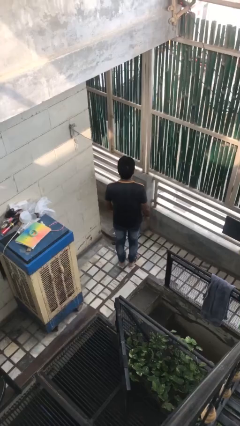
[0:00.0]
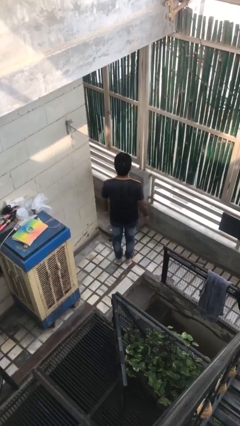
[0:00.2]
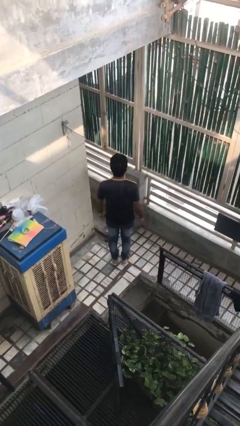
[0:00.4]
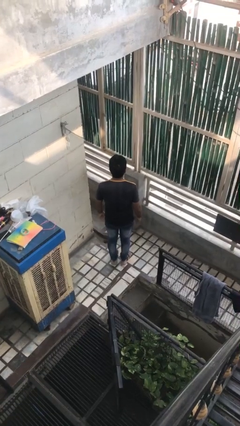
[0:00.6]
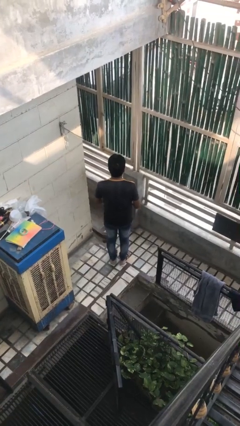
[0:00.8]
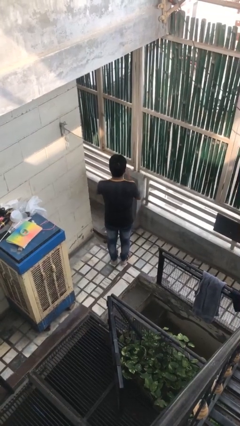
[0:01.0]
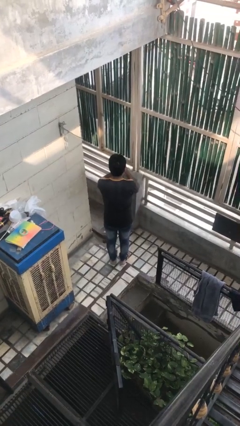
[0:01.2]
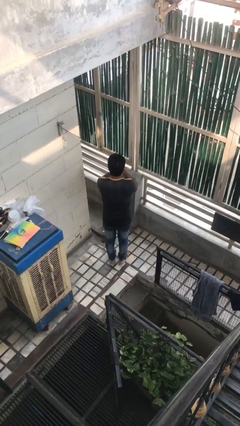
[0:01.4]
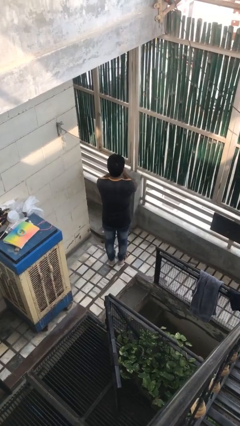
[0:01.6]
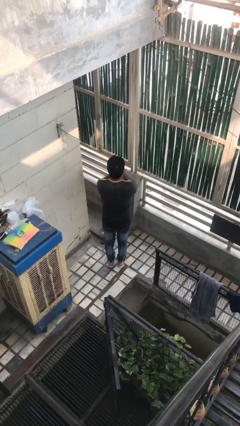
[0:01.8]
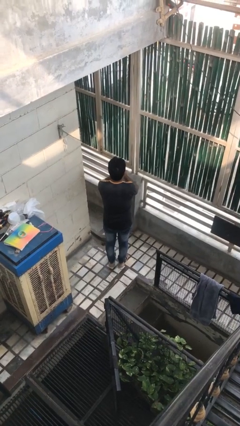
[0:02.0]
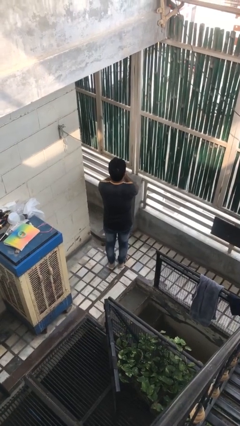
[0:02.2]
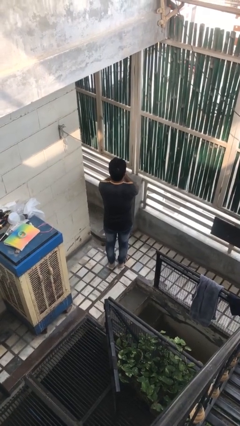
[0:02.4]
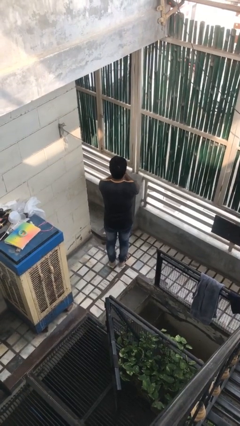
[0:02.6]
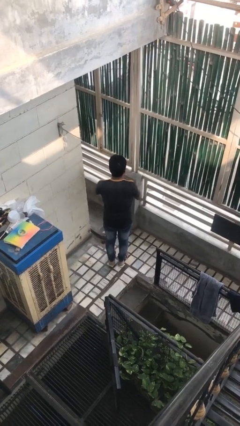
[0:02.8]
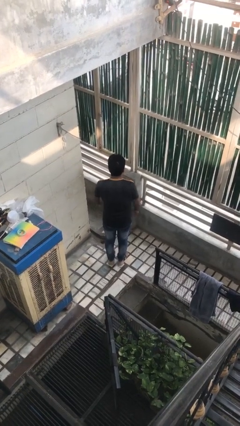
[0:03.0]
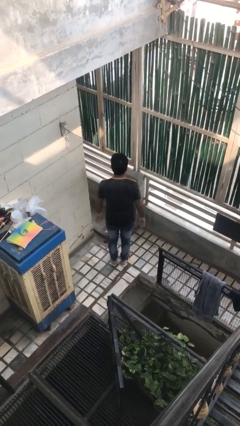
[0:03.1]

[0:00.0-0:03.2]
person prays

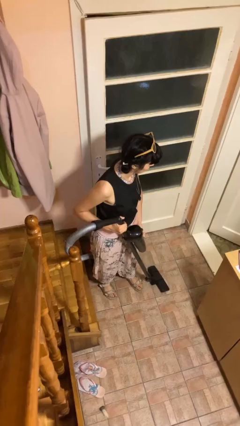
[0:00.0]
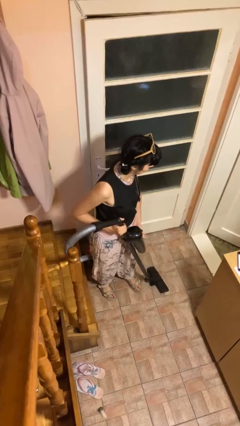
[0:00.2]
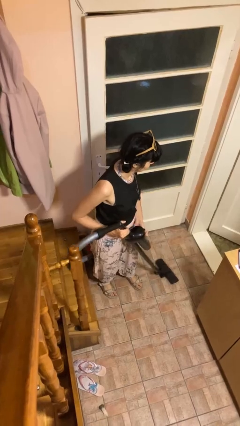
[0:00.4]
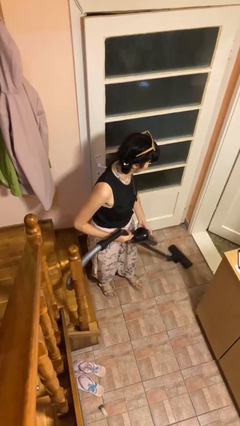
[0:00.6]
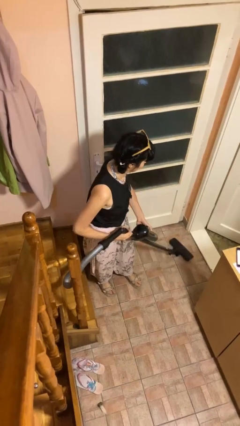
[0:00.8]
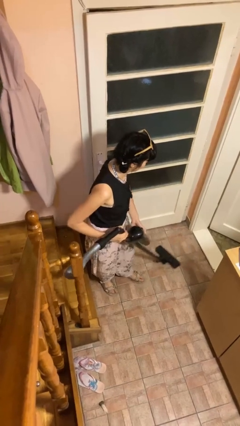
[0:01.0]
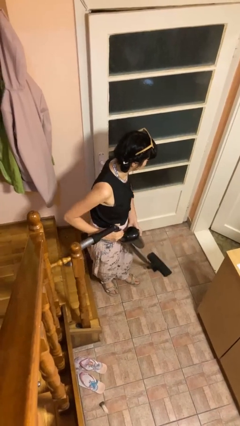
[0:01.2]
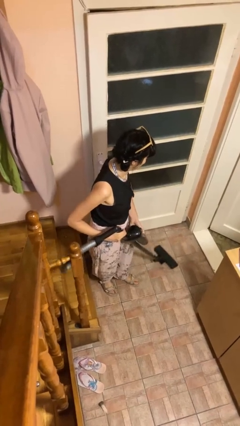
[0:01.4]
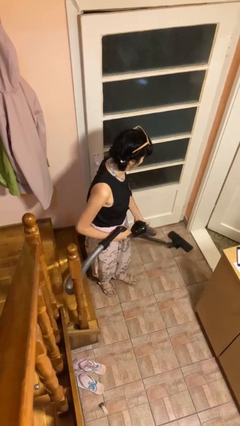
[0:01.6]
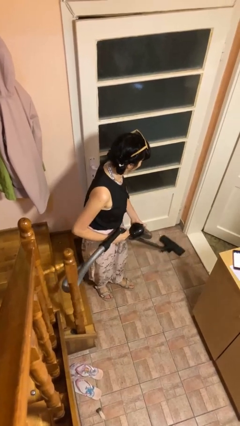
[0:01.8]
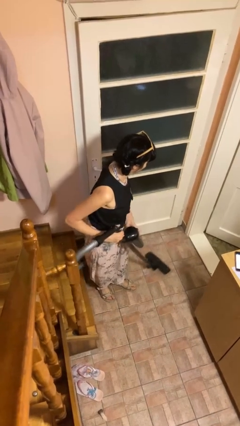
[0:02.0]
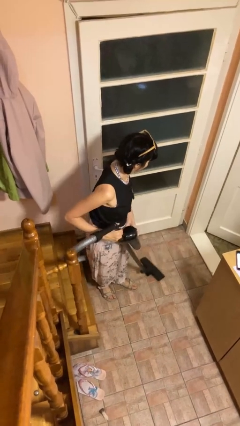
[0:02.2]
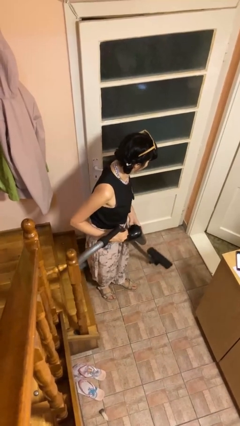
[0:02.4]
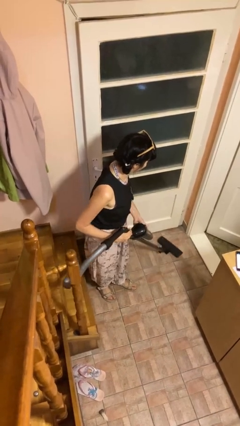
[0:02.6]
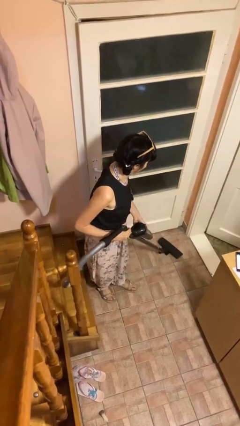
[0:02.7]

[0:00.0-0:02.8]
person vacuums carpet

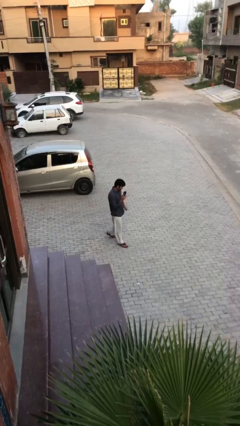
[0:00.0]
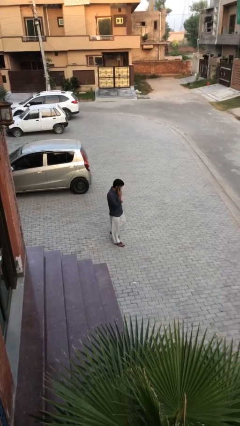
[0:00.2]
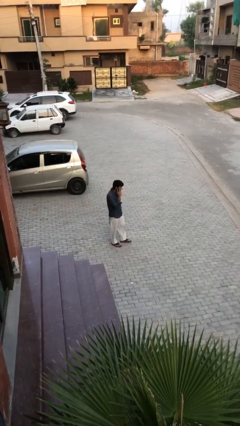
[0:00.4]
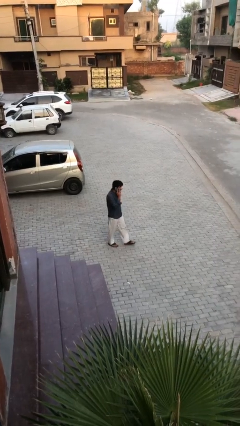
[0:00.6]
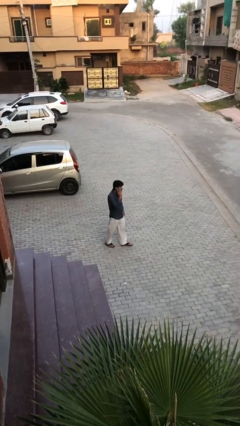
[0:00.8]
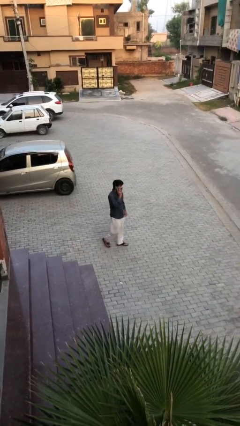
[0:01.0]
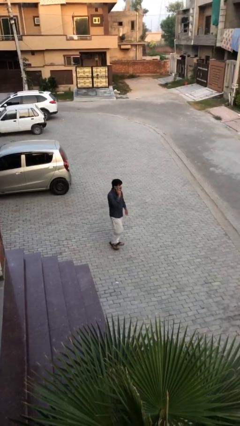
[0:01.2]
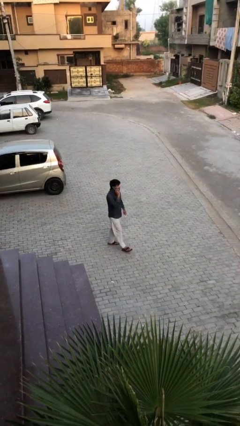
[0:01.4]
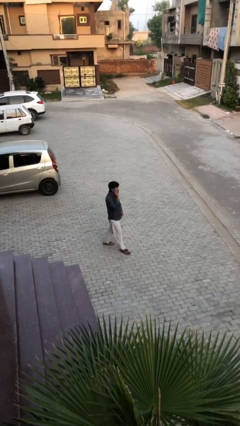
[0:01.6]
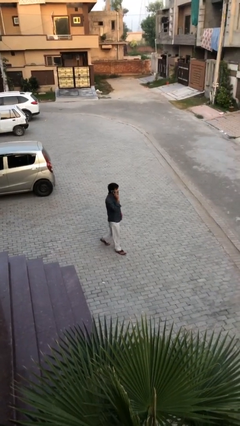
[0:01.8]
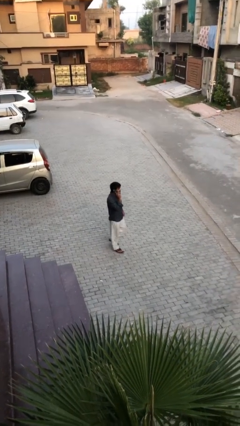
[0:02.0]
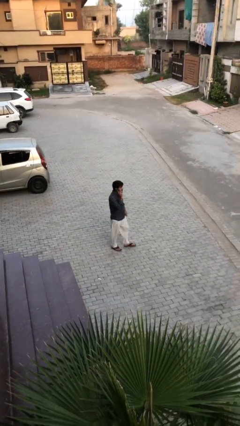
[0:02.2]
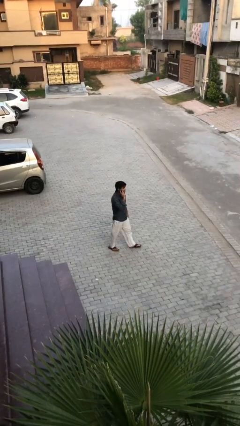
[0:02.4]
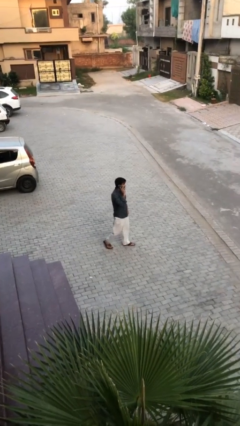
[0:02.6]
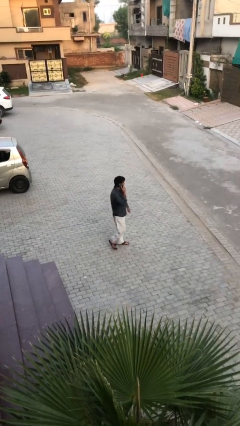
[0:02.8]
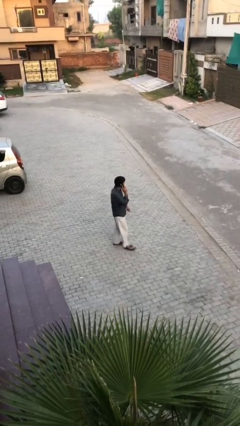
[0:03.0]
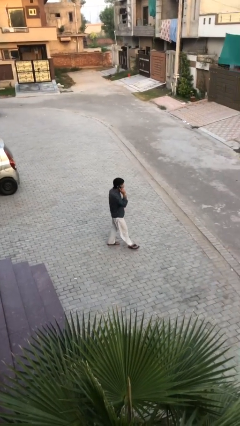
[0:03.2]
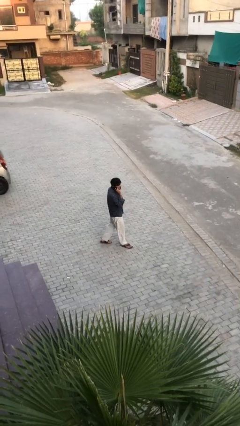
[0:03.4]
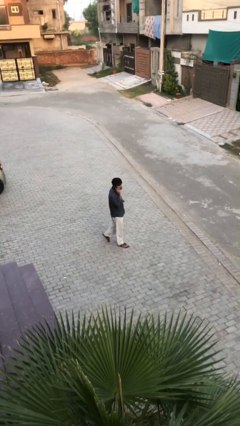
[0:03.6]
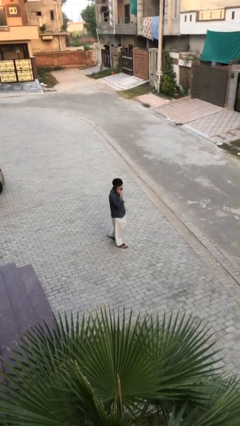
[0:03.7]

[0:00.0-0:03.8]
person talks on phone

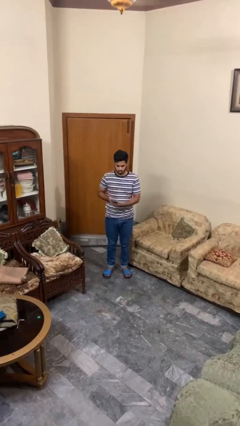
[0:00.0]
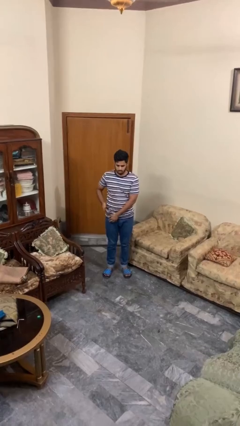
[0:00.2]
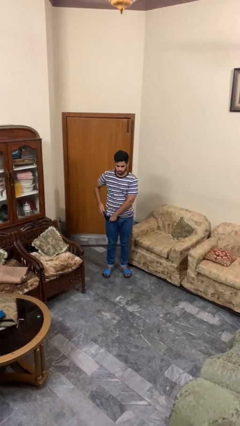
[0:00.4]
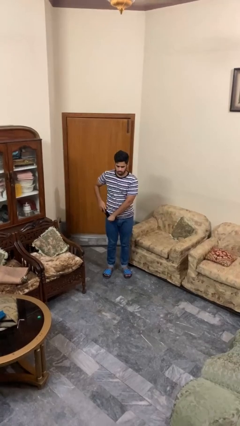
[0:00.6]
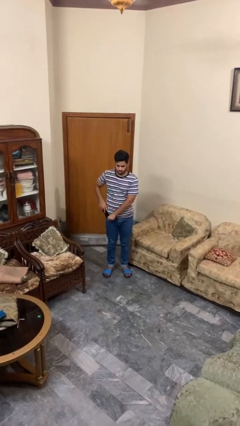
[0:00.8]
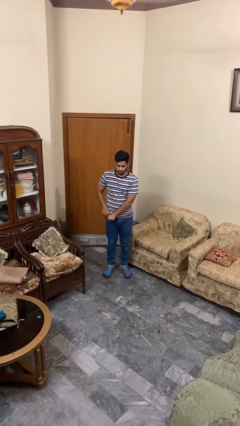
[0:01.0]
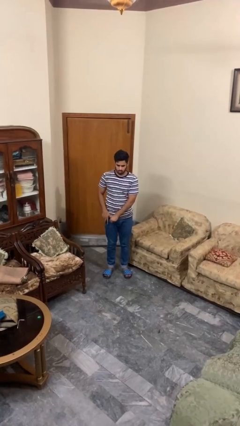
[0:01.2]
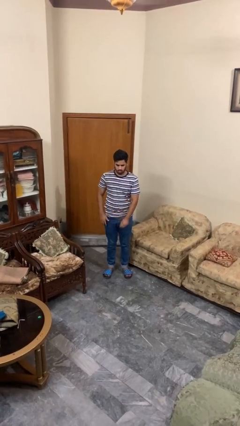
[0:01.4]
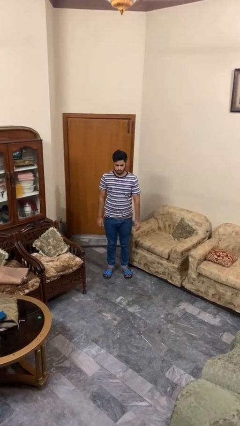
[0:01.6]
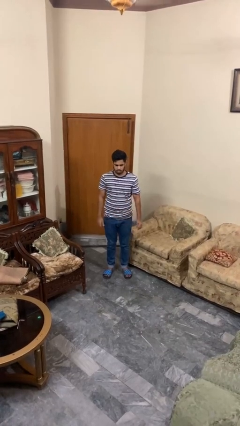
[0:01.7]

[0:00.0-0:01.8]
person puts phone into pocket

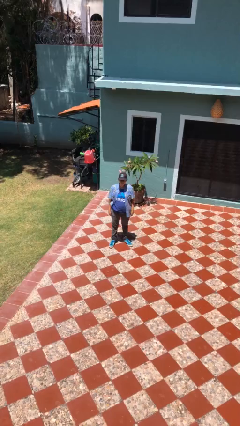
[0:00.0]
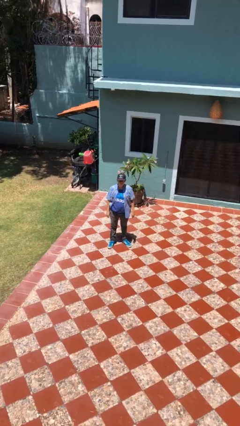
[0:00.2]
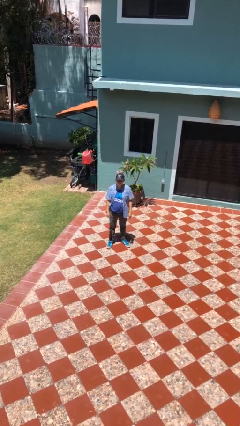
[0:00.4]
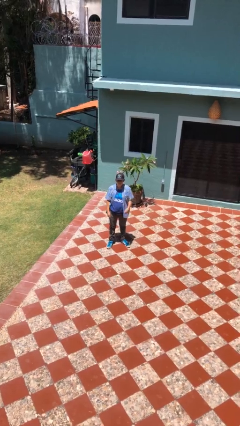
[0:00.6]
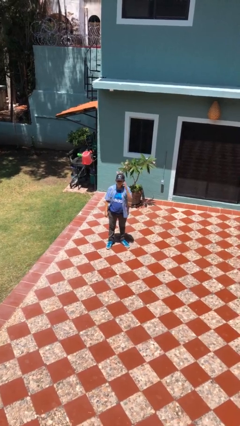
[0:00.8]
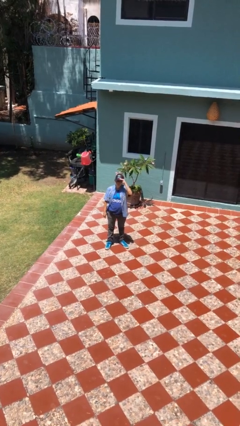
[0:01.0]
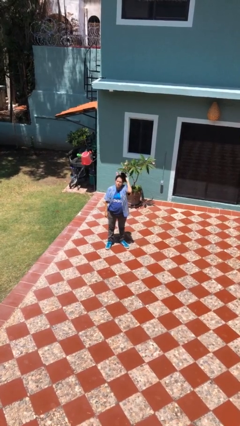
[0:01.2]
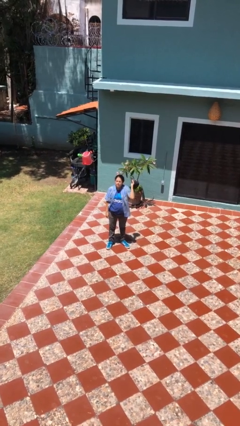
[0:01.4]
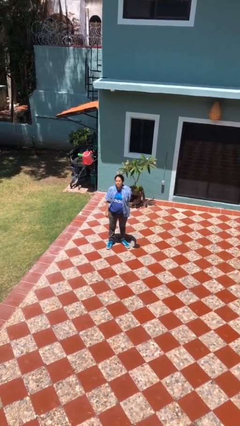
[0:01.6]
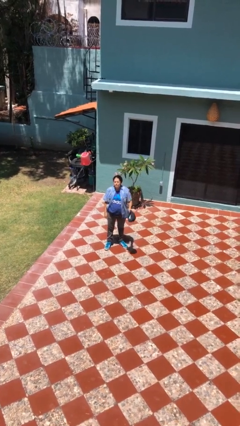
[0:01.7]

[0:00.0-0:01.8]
person takes off hat

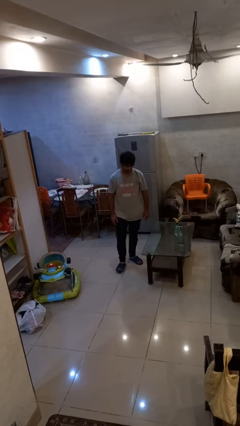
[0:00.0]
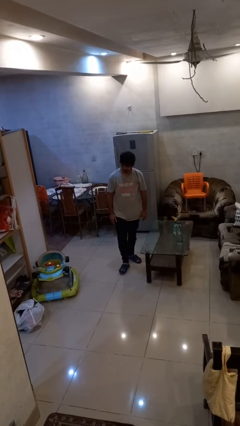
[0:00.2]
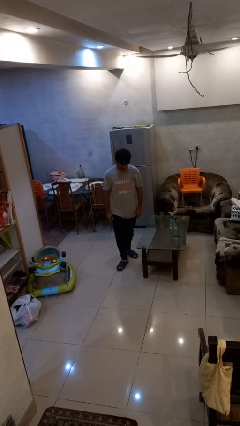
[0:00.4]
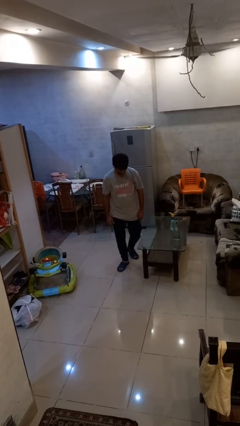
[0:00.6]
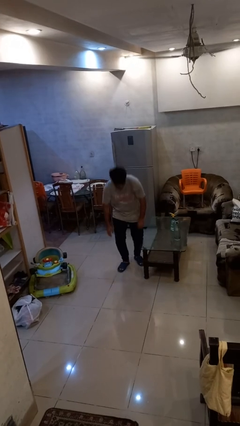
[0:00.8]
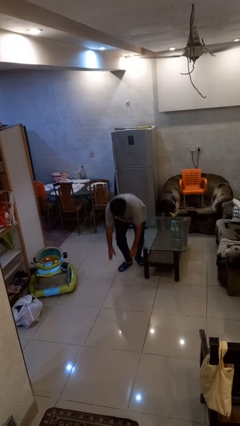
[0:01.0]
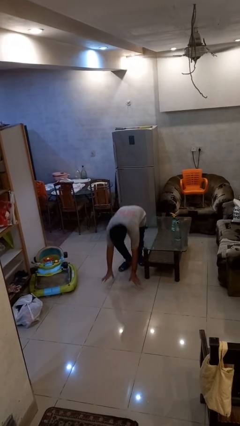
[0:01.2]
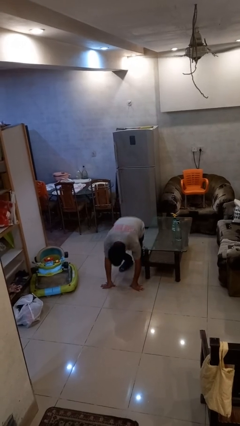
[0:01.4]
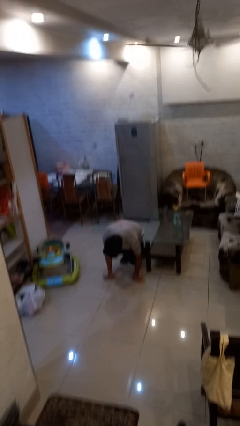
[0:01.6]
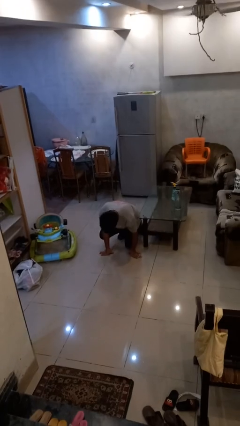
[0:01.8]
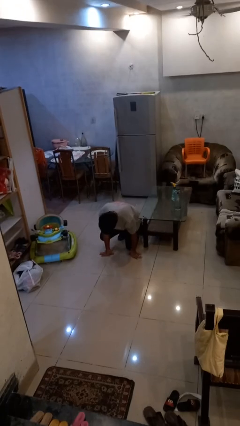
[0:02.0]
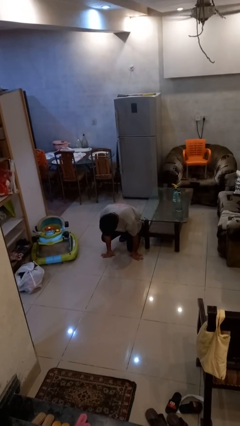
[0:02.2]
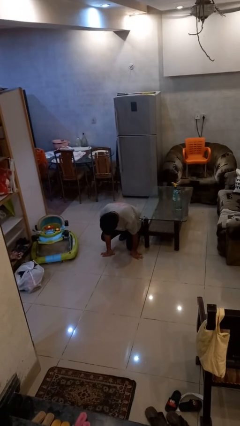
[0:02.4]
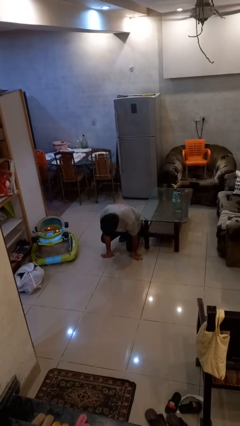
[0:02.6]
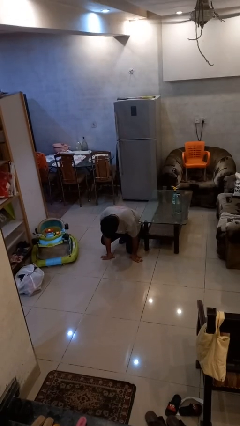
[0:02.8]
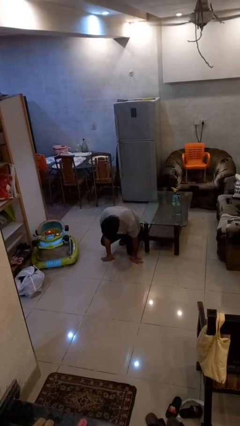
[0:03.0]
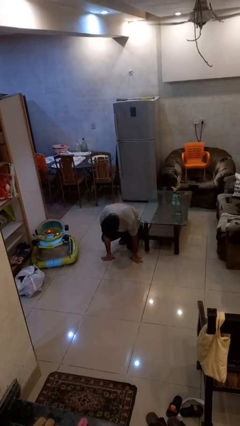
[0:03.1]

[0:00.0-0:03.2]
person trips on object on floor

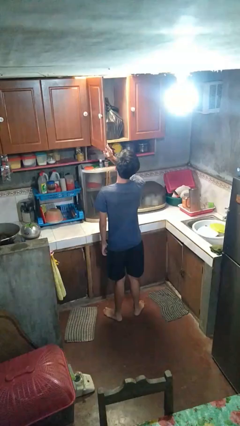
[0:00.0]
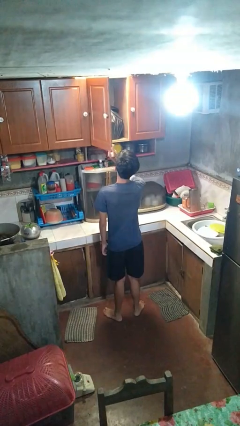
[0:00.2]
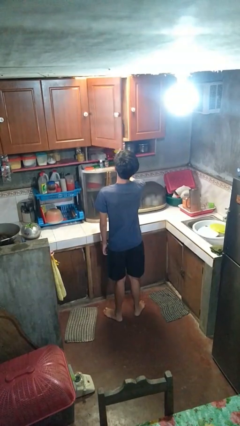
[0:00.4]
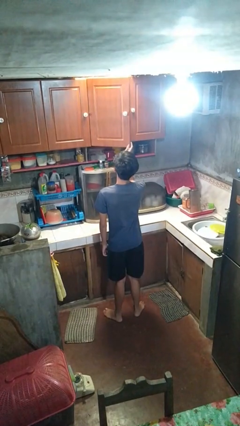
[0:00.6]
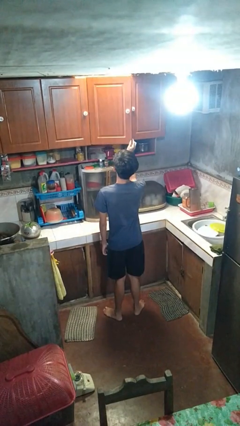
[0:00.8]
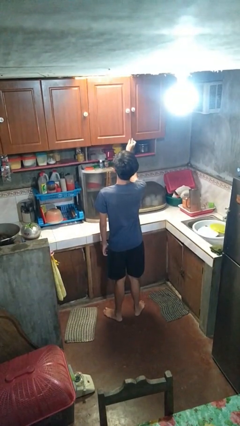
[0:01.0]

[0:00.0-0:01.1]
person closes cabinet
